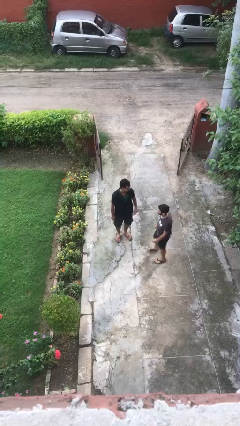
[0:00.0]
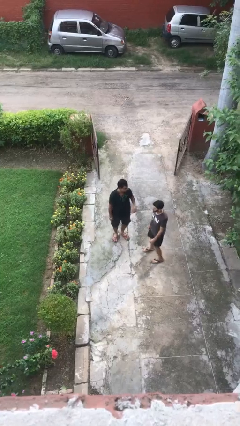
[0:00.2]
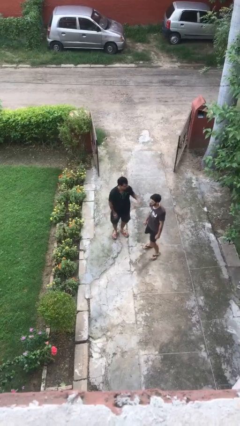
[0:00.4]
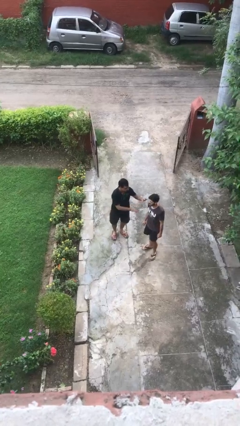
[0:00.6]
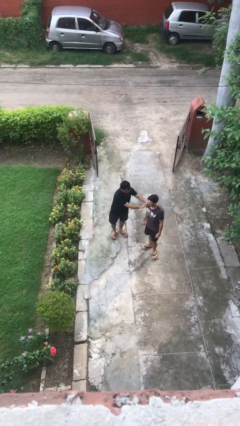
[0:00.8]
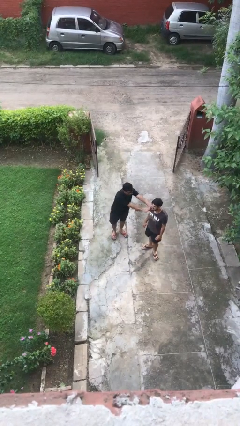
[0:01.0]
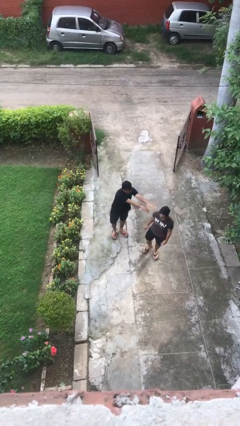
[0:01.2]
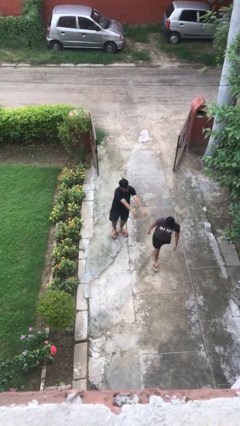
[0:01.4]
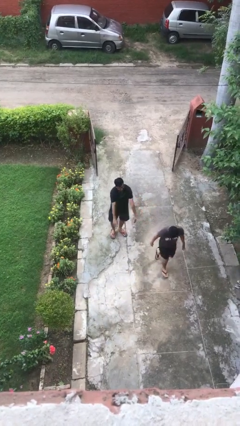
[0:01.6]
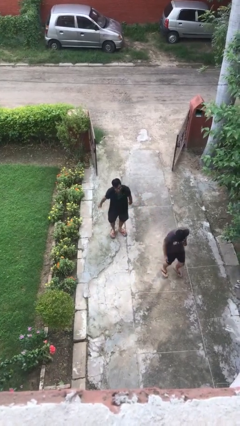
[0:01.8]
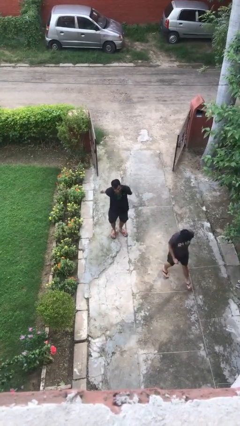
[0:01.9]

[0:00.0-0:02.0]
person shoves person

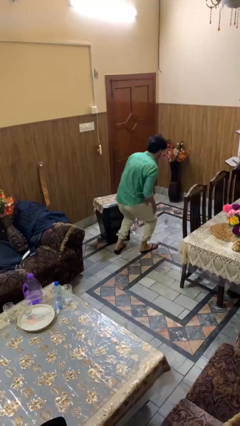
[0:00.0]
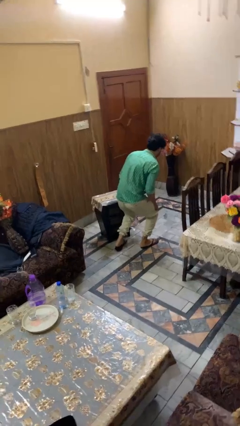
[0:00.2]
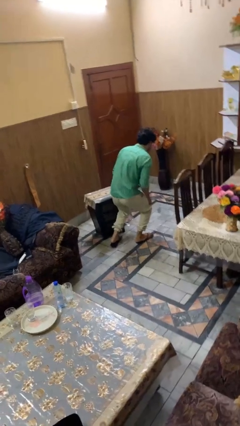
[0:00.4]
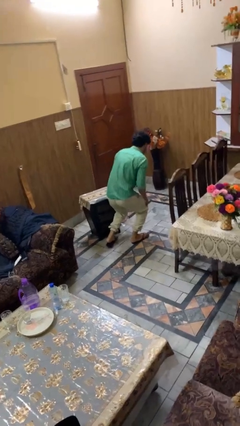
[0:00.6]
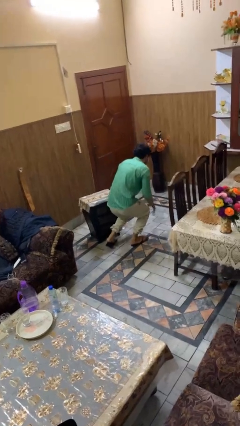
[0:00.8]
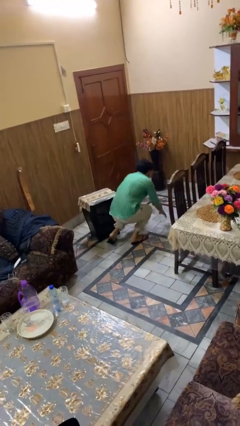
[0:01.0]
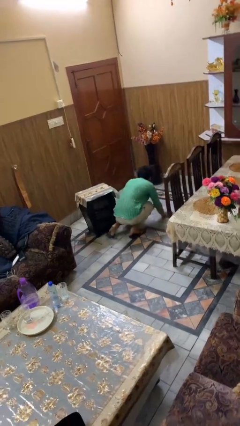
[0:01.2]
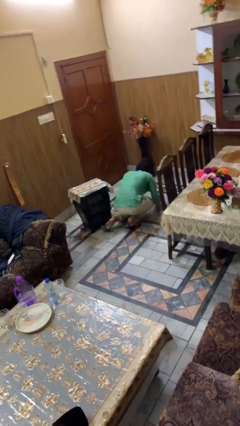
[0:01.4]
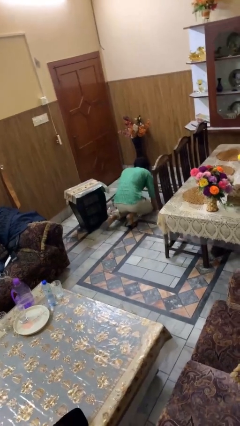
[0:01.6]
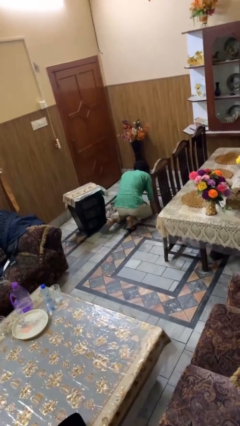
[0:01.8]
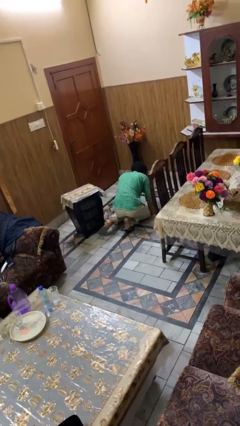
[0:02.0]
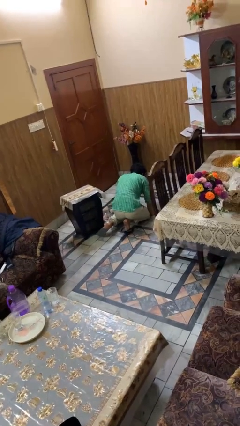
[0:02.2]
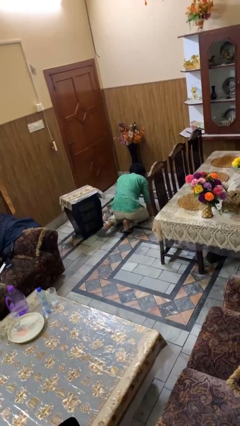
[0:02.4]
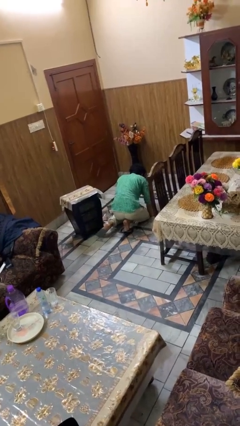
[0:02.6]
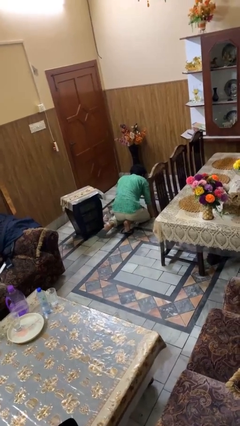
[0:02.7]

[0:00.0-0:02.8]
person lies down on floor

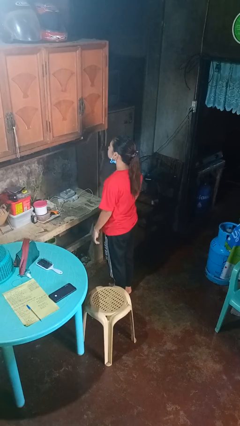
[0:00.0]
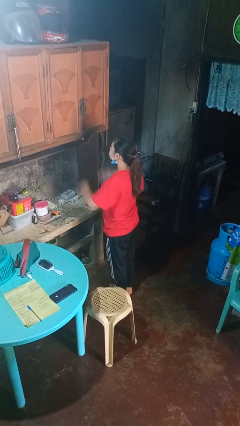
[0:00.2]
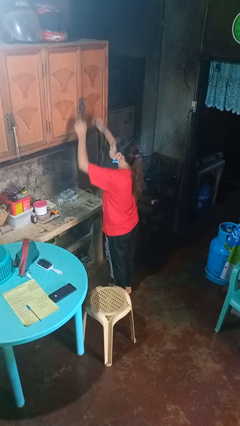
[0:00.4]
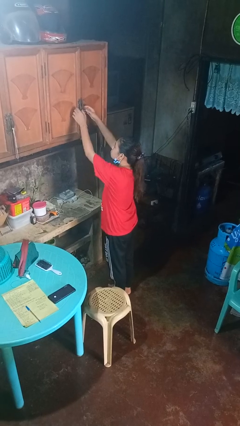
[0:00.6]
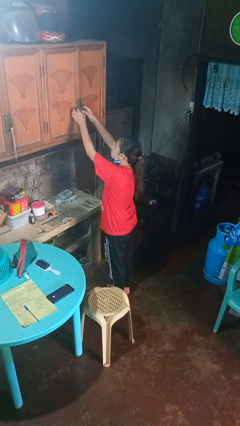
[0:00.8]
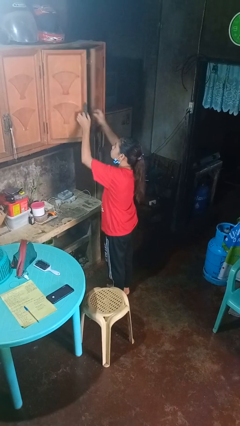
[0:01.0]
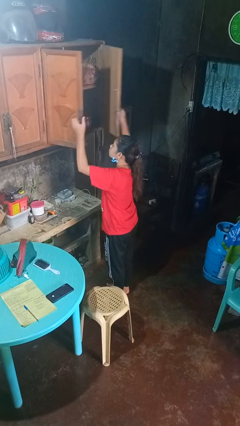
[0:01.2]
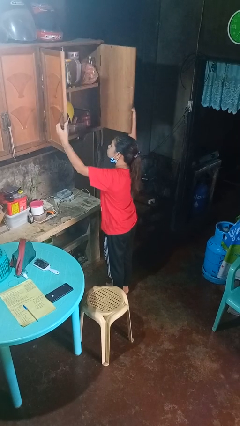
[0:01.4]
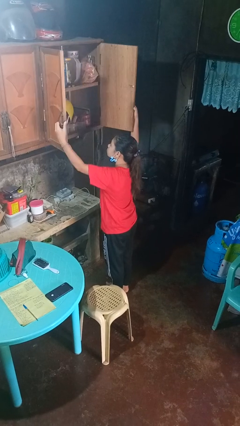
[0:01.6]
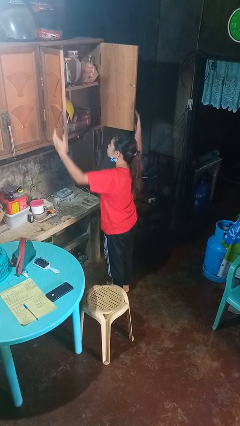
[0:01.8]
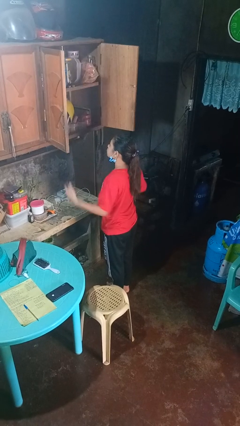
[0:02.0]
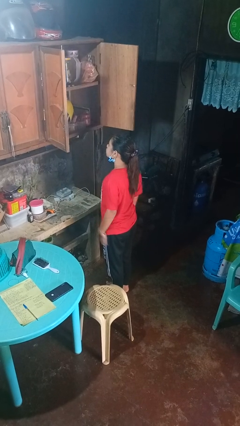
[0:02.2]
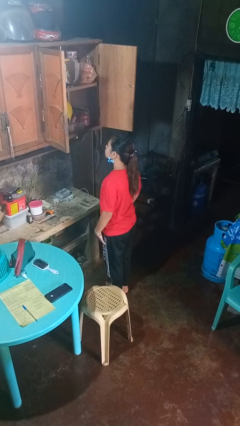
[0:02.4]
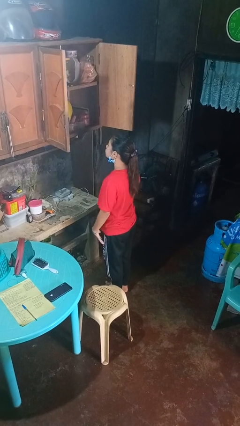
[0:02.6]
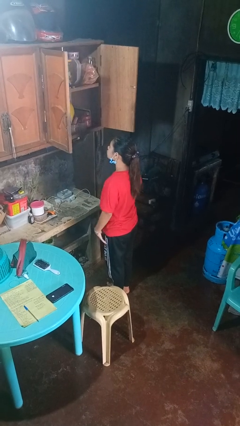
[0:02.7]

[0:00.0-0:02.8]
person opens cabinet

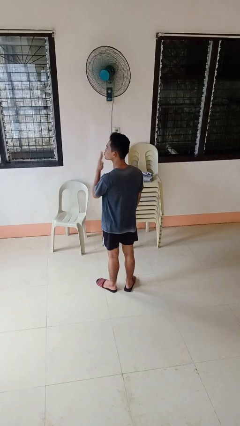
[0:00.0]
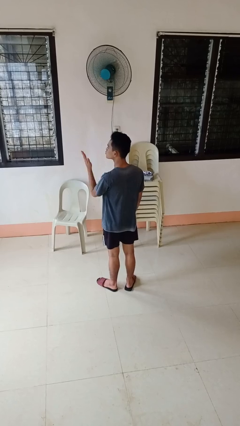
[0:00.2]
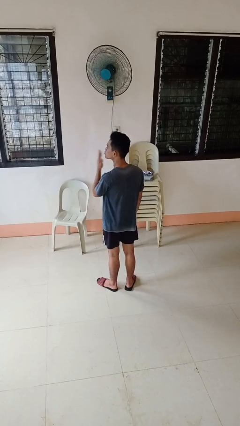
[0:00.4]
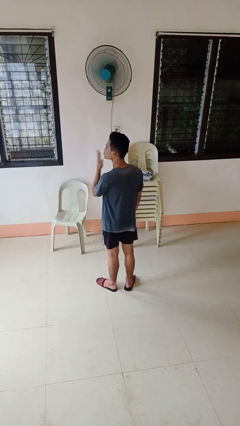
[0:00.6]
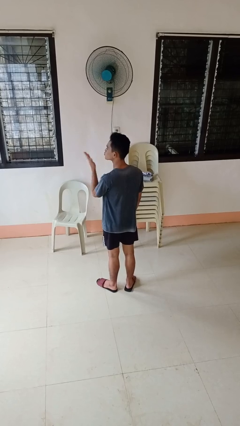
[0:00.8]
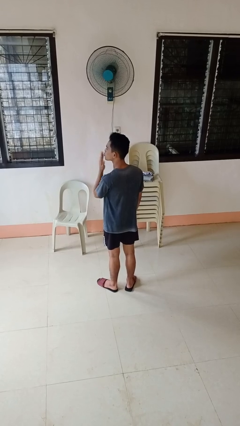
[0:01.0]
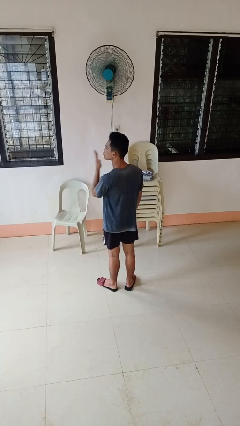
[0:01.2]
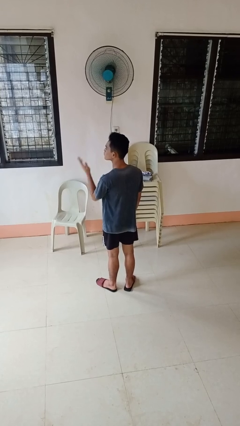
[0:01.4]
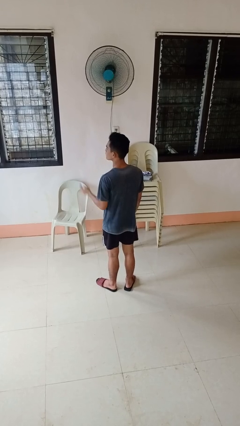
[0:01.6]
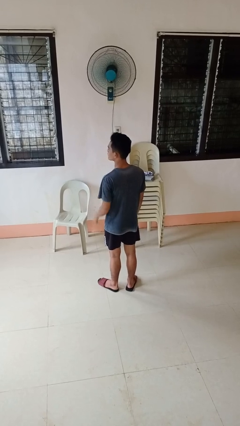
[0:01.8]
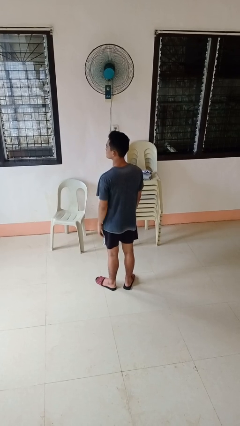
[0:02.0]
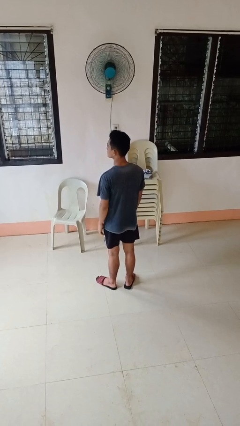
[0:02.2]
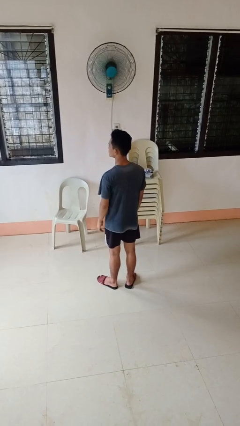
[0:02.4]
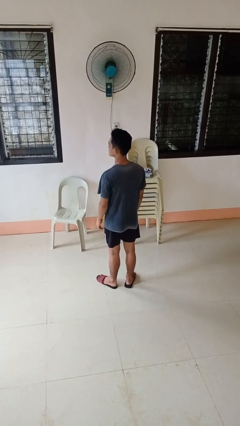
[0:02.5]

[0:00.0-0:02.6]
person gestures blow kiss

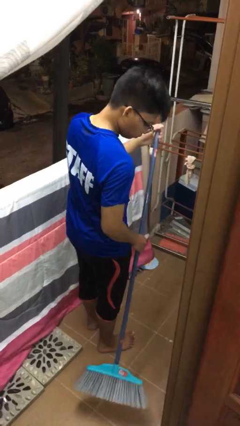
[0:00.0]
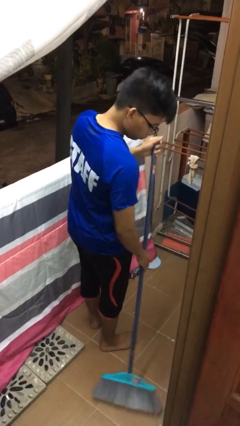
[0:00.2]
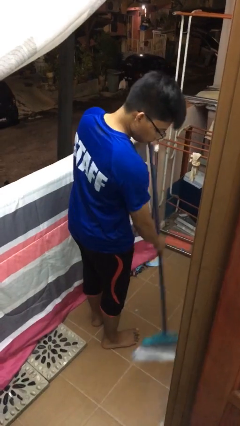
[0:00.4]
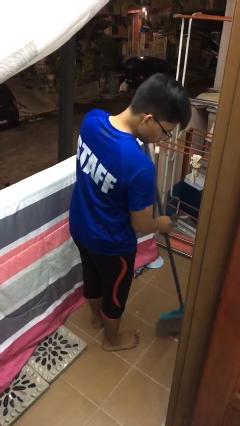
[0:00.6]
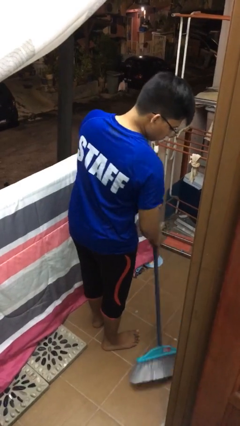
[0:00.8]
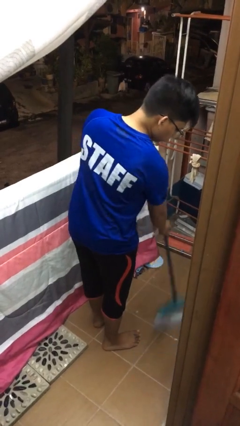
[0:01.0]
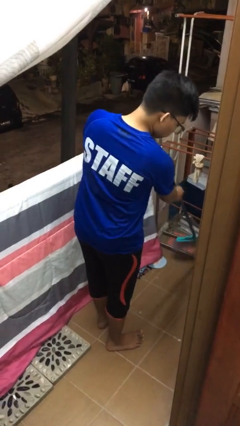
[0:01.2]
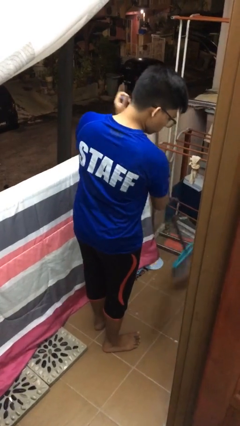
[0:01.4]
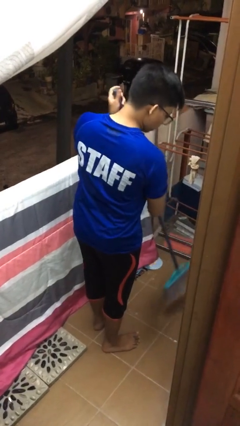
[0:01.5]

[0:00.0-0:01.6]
person sweeps floor

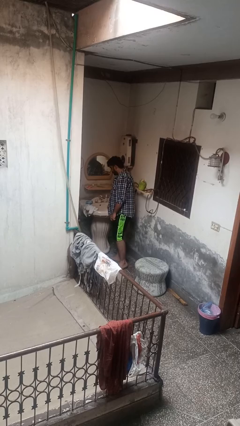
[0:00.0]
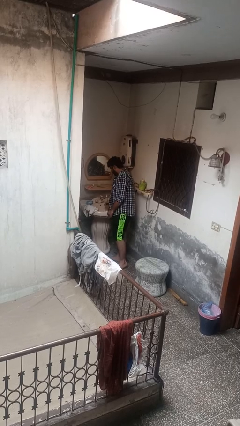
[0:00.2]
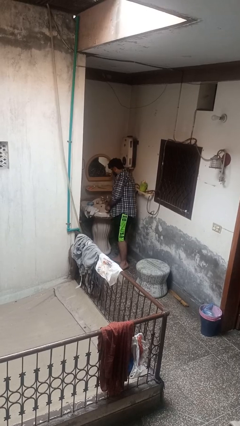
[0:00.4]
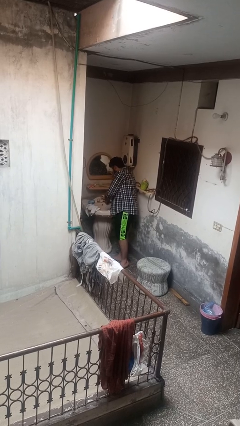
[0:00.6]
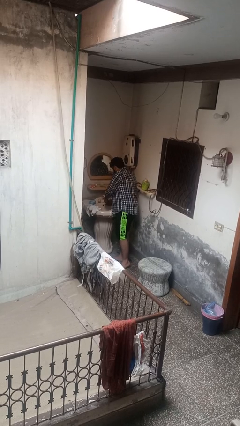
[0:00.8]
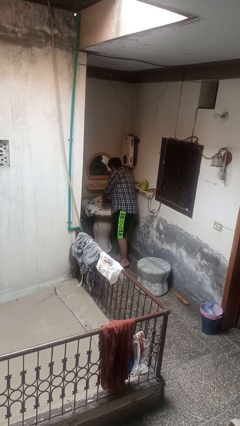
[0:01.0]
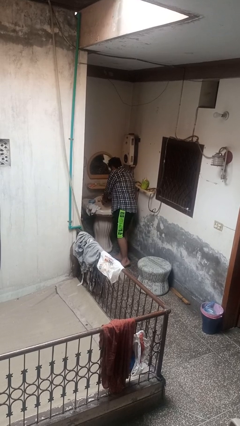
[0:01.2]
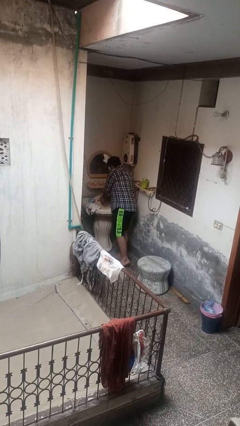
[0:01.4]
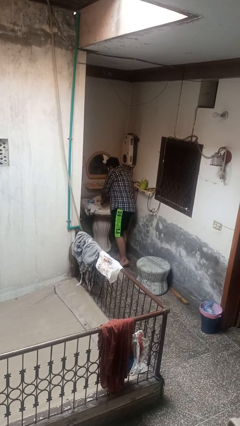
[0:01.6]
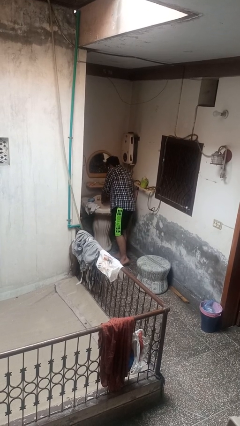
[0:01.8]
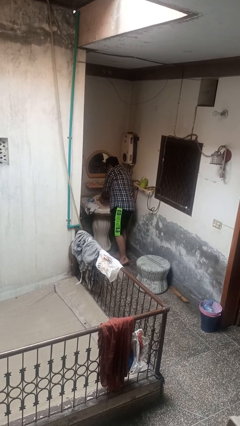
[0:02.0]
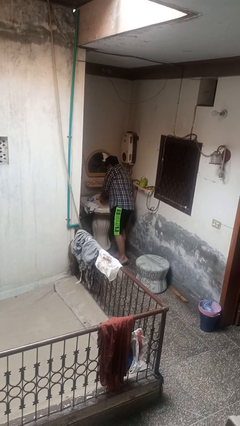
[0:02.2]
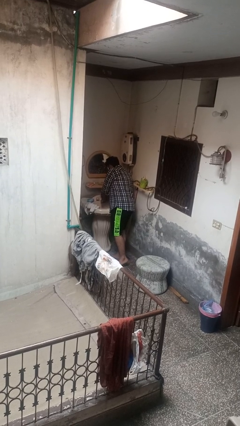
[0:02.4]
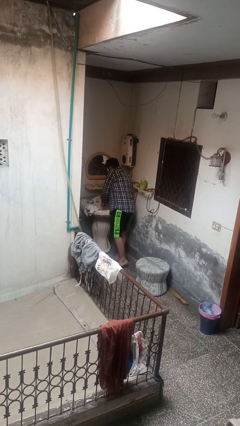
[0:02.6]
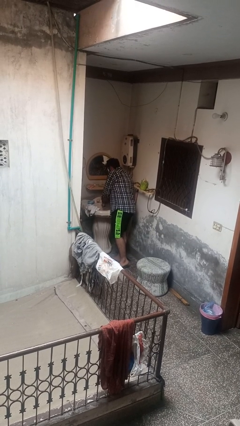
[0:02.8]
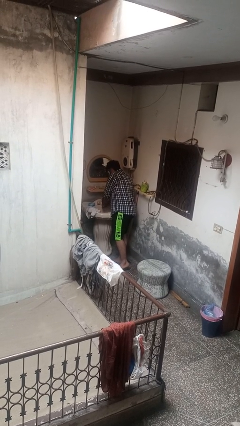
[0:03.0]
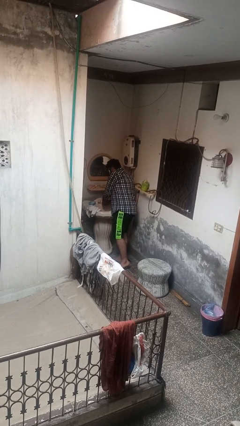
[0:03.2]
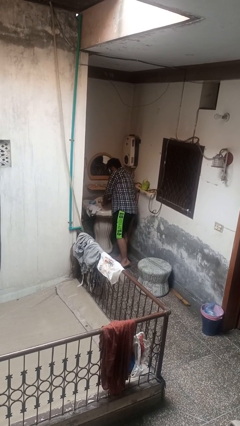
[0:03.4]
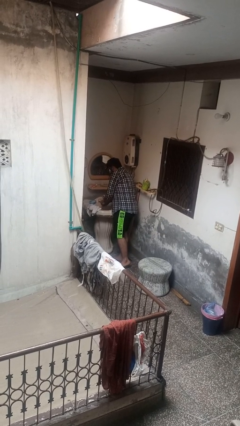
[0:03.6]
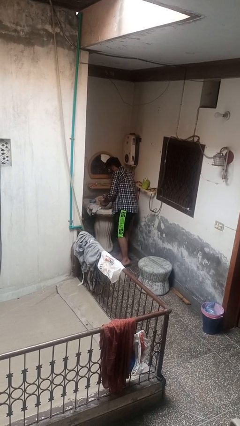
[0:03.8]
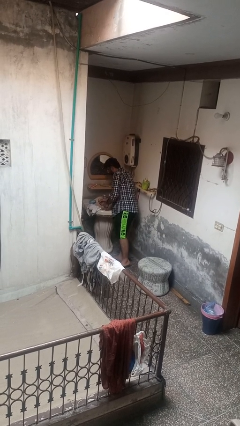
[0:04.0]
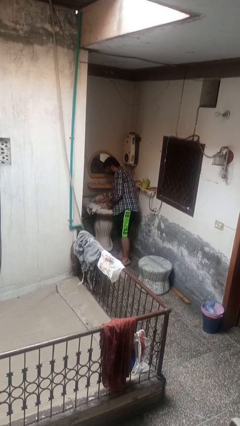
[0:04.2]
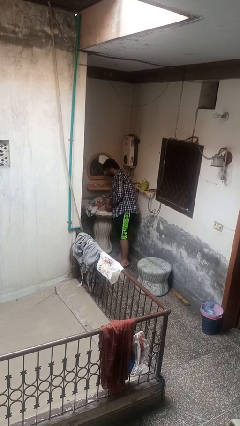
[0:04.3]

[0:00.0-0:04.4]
person washes hands

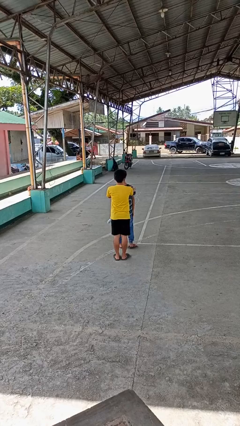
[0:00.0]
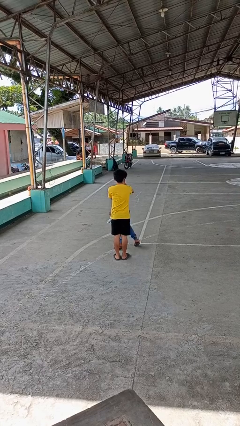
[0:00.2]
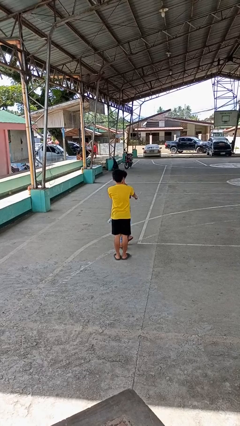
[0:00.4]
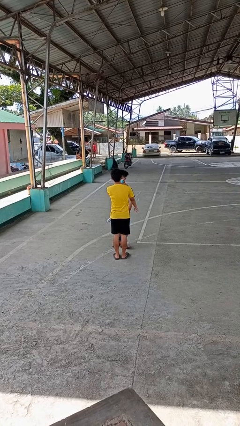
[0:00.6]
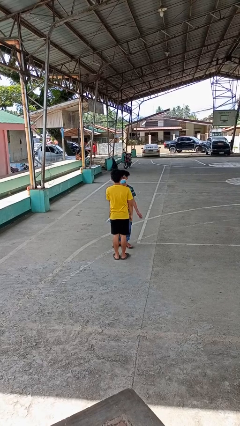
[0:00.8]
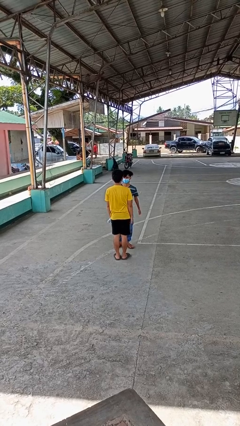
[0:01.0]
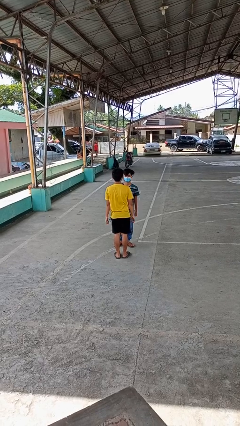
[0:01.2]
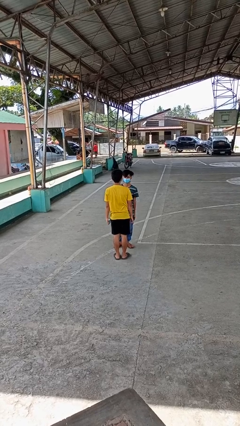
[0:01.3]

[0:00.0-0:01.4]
person spins person around
